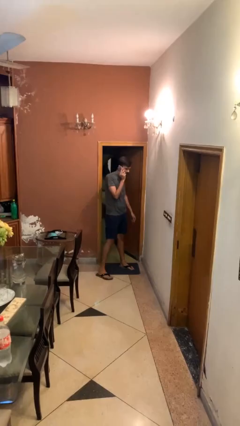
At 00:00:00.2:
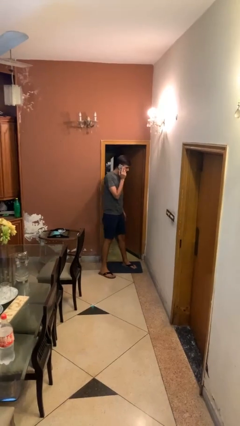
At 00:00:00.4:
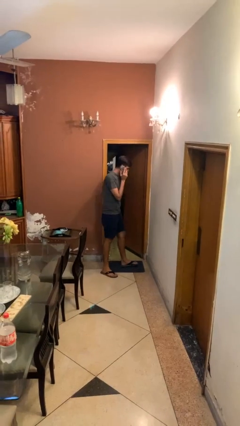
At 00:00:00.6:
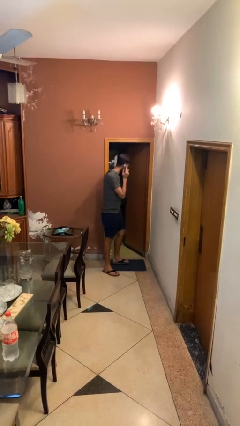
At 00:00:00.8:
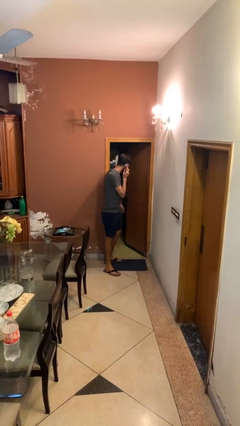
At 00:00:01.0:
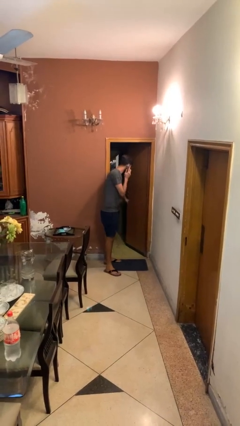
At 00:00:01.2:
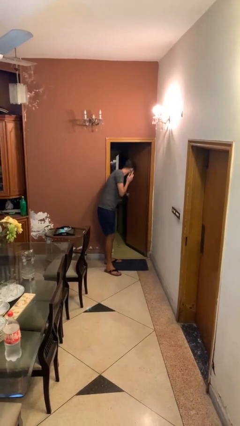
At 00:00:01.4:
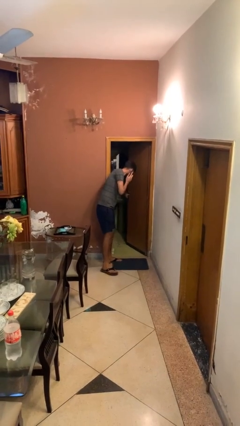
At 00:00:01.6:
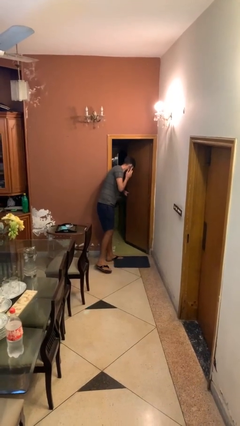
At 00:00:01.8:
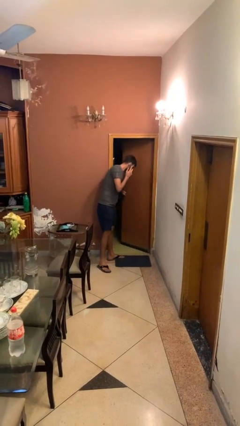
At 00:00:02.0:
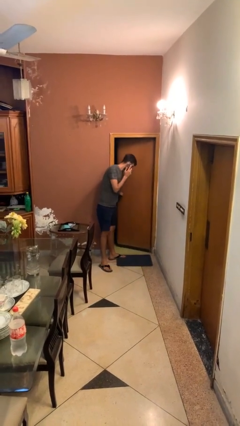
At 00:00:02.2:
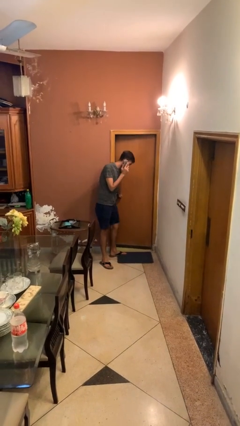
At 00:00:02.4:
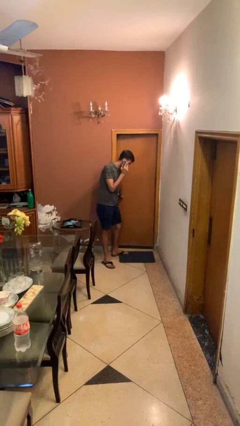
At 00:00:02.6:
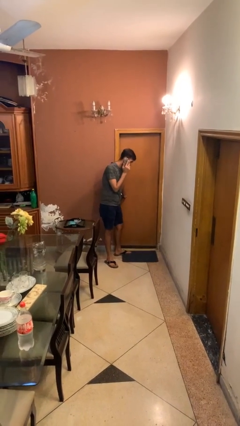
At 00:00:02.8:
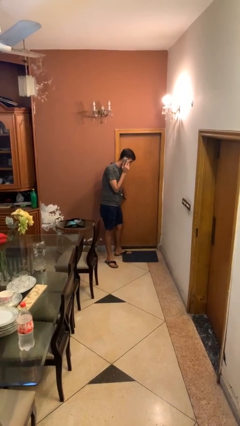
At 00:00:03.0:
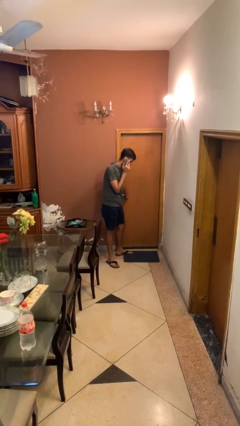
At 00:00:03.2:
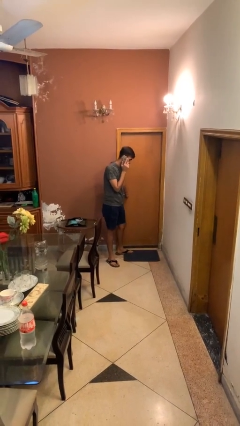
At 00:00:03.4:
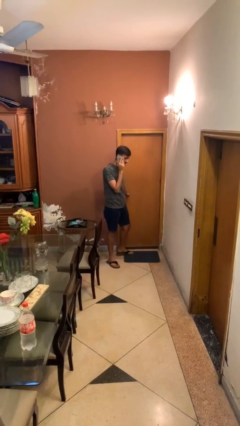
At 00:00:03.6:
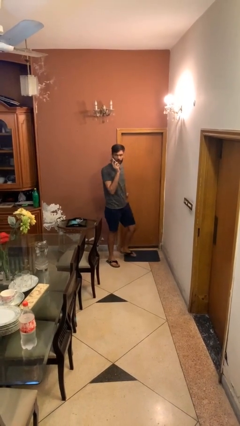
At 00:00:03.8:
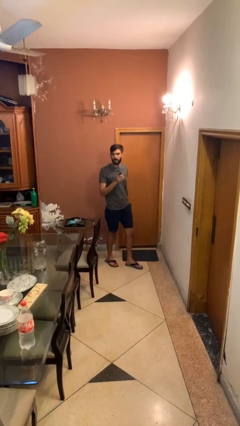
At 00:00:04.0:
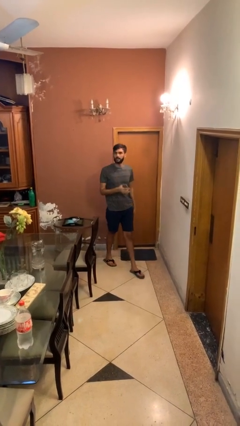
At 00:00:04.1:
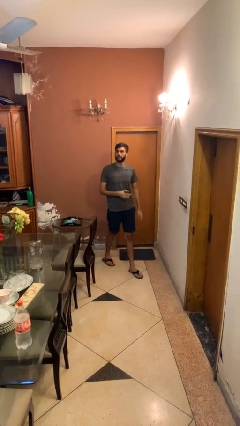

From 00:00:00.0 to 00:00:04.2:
person closes facility door

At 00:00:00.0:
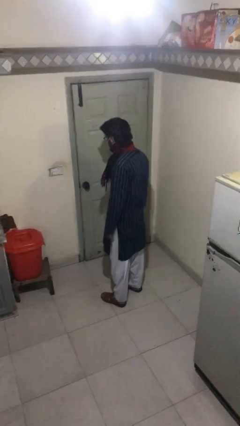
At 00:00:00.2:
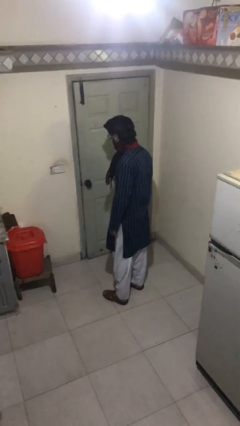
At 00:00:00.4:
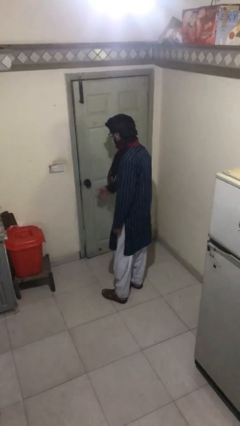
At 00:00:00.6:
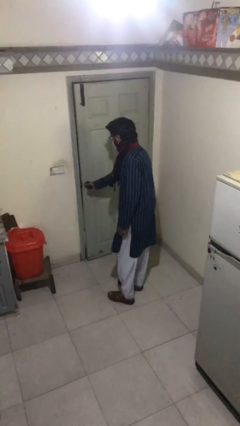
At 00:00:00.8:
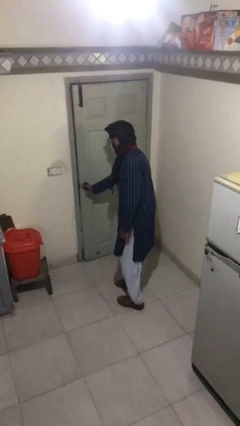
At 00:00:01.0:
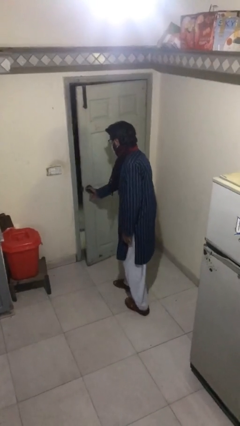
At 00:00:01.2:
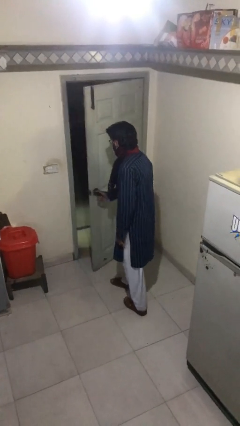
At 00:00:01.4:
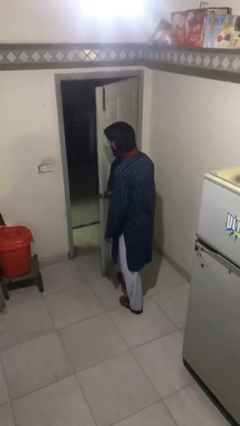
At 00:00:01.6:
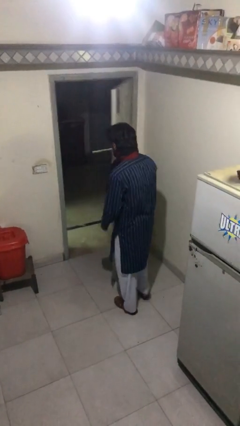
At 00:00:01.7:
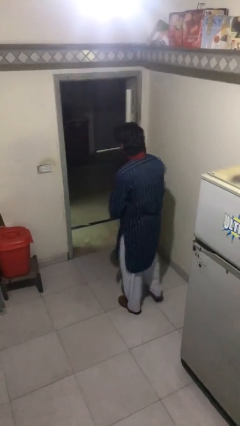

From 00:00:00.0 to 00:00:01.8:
person opens facility door

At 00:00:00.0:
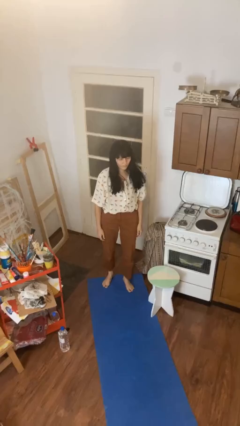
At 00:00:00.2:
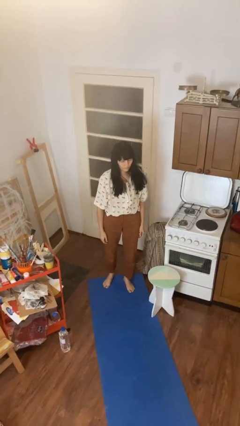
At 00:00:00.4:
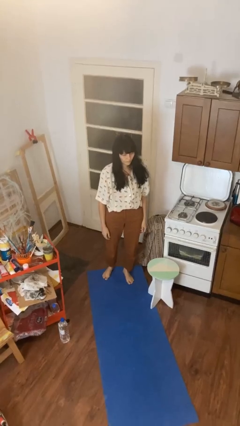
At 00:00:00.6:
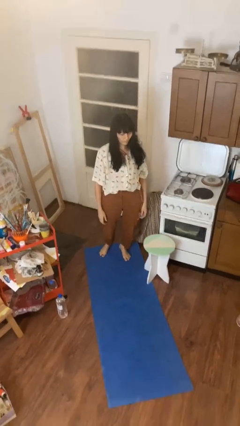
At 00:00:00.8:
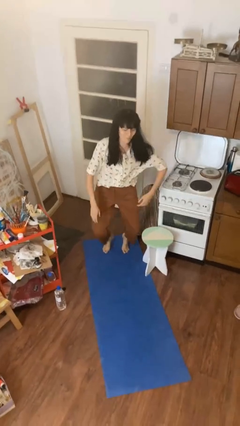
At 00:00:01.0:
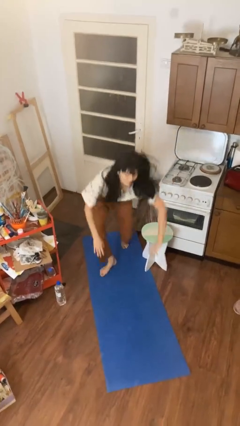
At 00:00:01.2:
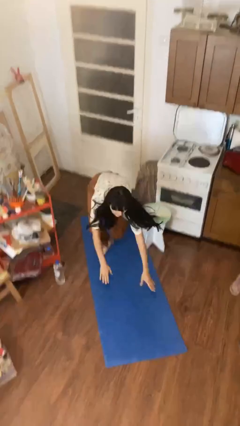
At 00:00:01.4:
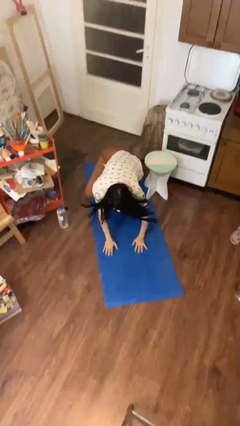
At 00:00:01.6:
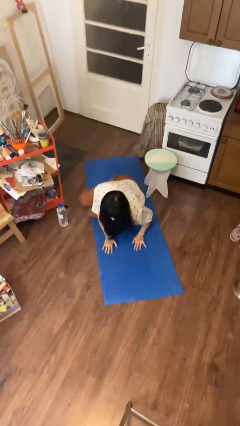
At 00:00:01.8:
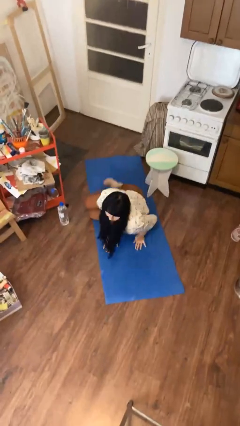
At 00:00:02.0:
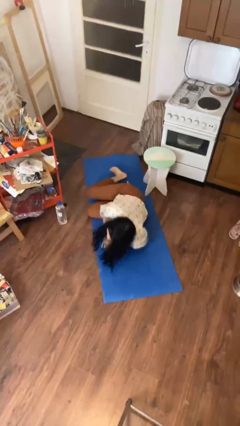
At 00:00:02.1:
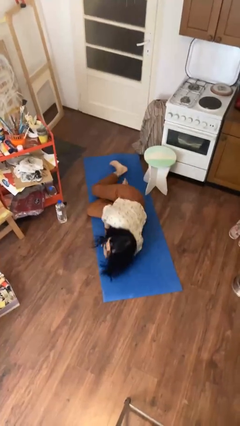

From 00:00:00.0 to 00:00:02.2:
person trips on object on floor

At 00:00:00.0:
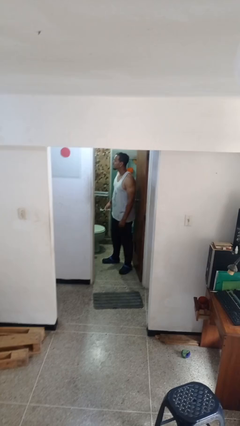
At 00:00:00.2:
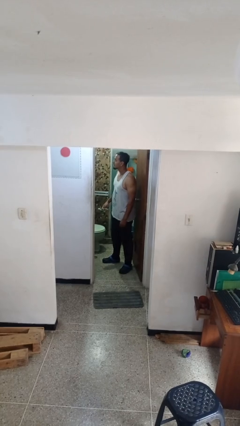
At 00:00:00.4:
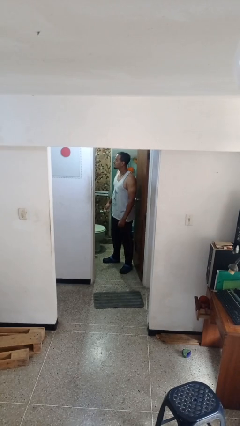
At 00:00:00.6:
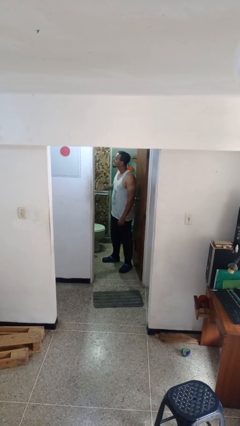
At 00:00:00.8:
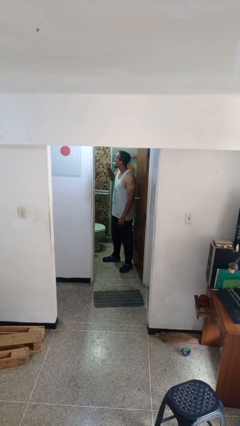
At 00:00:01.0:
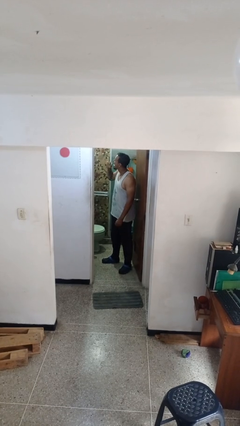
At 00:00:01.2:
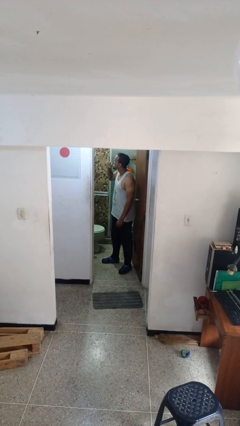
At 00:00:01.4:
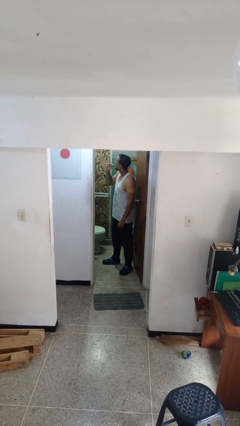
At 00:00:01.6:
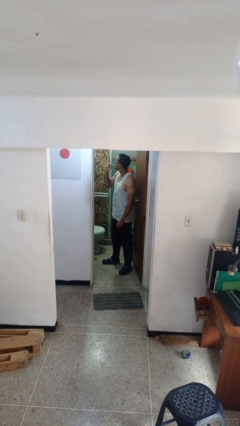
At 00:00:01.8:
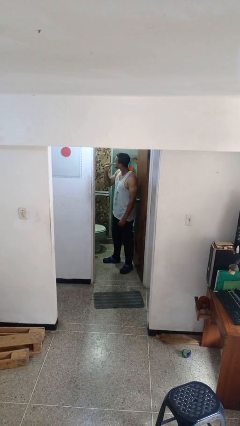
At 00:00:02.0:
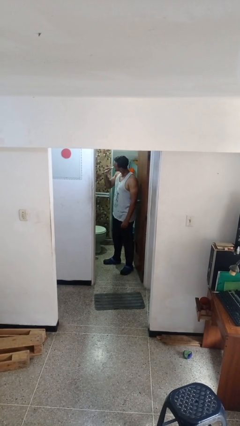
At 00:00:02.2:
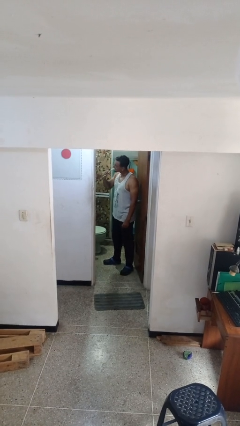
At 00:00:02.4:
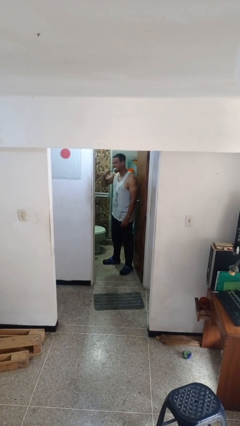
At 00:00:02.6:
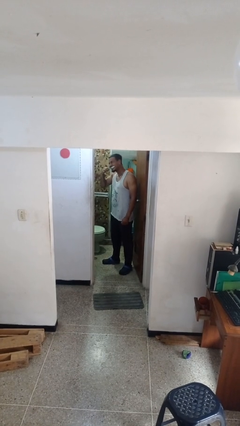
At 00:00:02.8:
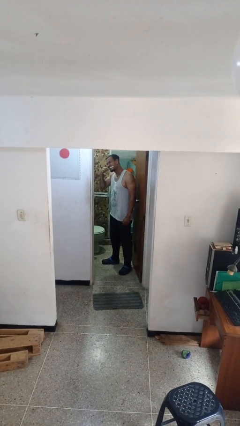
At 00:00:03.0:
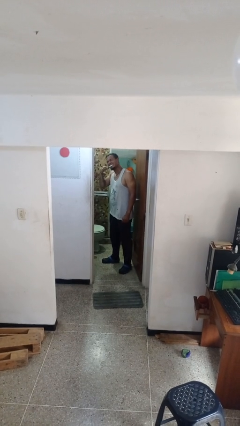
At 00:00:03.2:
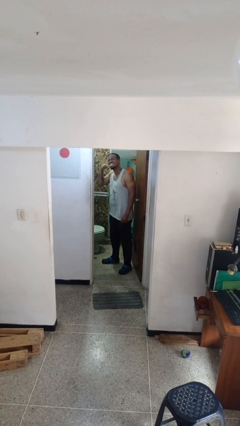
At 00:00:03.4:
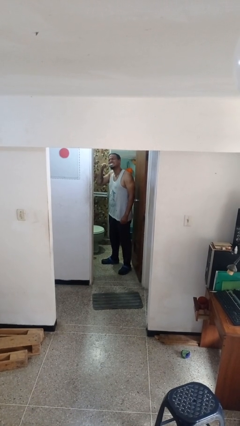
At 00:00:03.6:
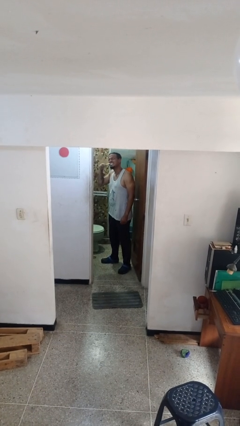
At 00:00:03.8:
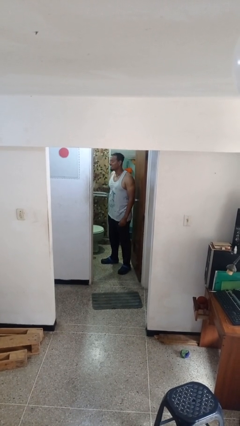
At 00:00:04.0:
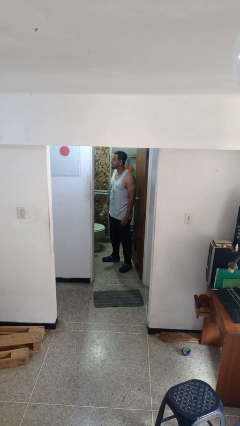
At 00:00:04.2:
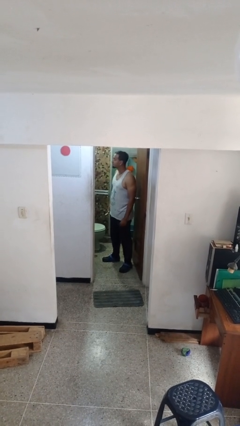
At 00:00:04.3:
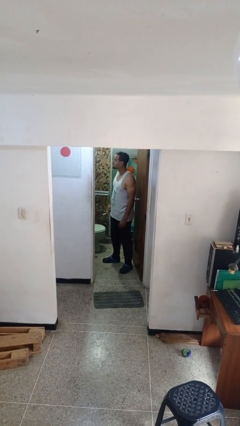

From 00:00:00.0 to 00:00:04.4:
person brushes teeth

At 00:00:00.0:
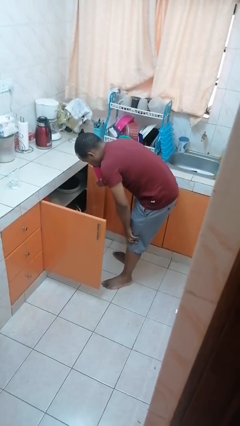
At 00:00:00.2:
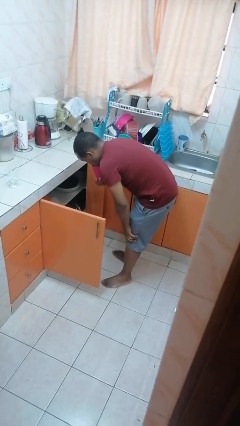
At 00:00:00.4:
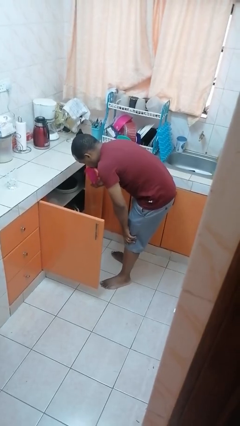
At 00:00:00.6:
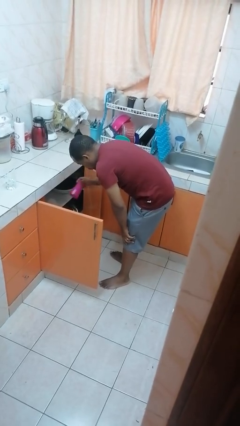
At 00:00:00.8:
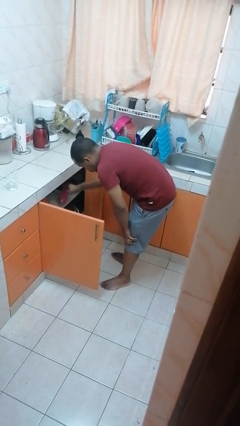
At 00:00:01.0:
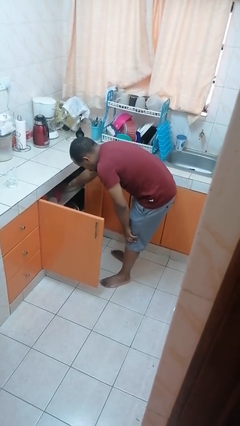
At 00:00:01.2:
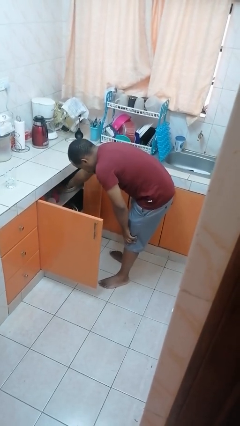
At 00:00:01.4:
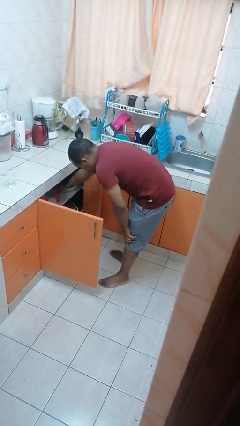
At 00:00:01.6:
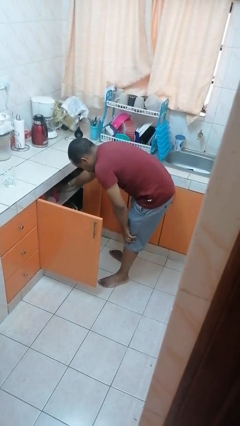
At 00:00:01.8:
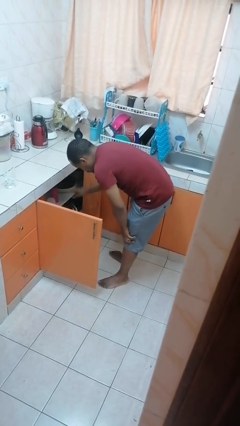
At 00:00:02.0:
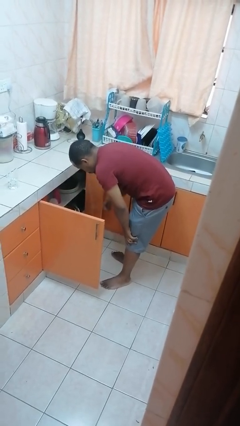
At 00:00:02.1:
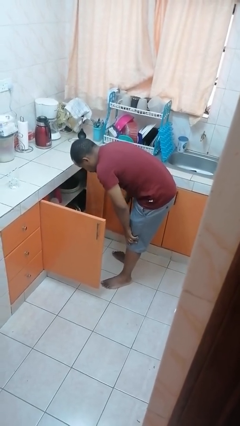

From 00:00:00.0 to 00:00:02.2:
person puts object in cabinet

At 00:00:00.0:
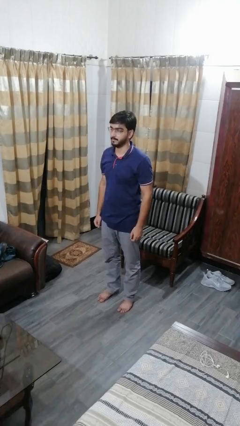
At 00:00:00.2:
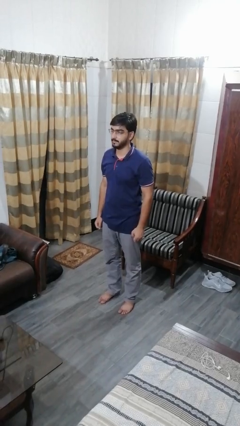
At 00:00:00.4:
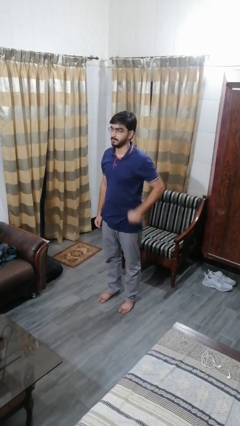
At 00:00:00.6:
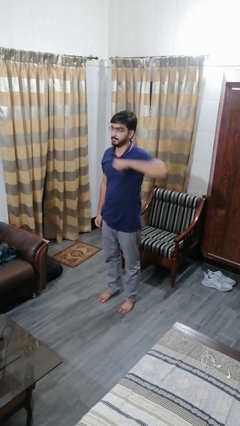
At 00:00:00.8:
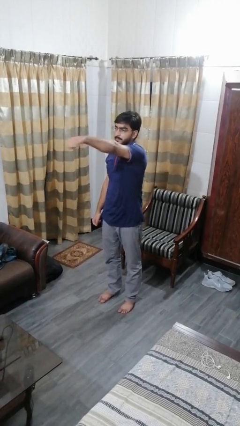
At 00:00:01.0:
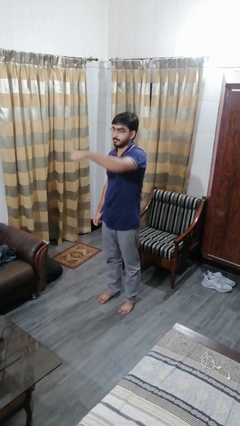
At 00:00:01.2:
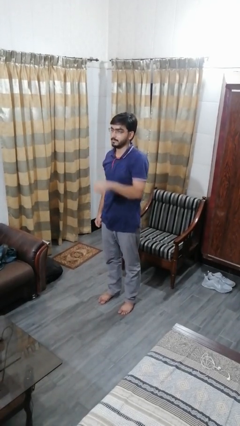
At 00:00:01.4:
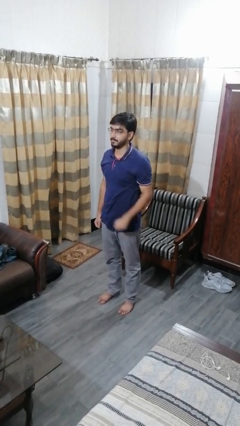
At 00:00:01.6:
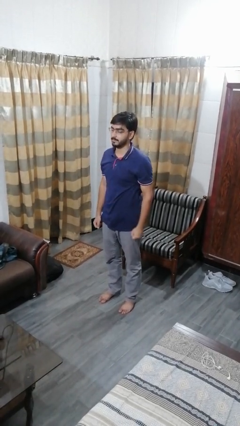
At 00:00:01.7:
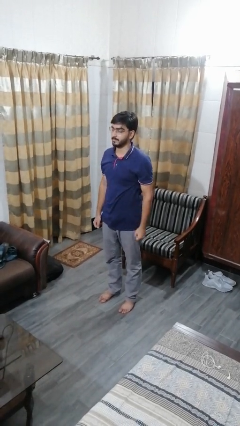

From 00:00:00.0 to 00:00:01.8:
person punches

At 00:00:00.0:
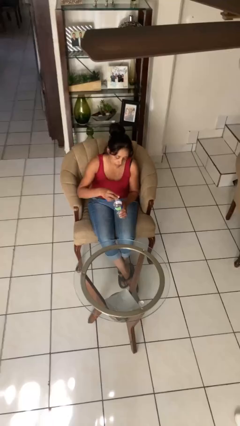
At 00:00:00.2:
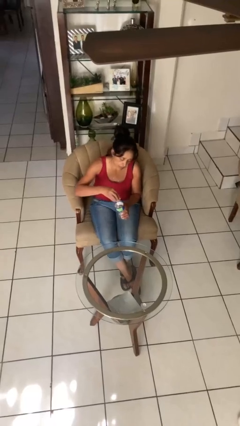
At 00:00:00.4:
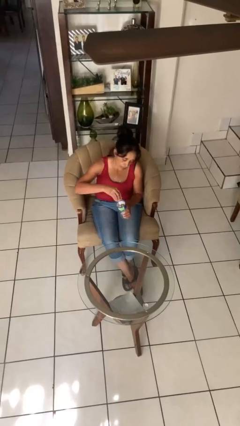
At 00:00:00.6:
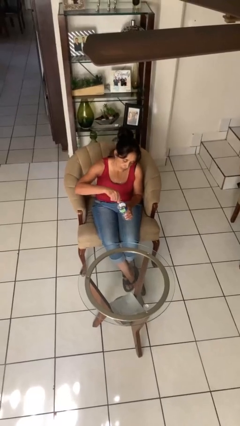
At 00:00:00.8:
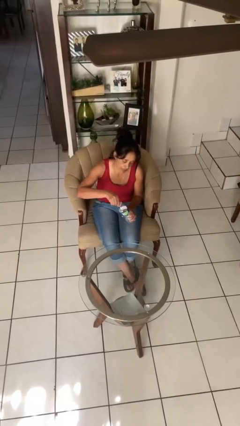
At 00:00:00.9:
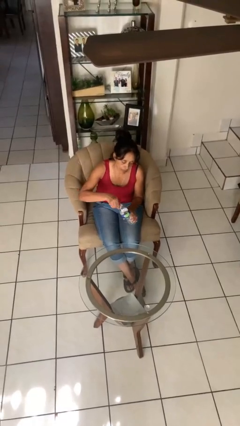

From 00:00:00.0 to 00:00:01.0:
person screws lid to bottle
